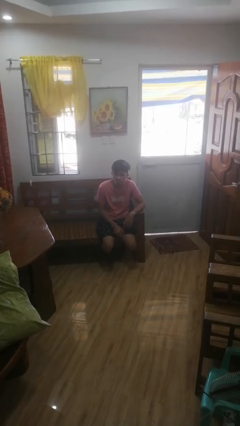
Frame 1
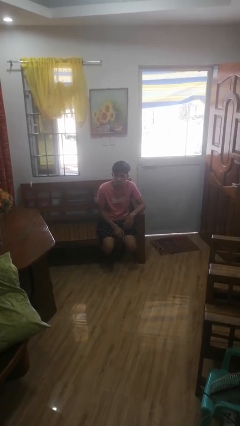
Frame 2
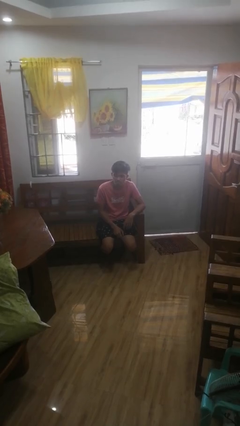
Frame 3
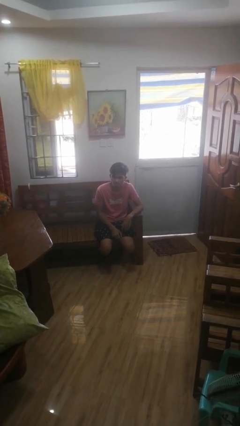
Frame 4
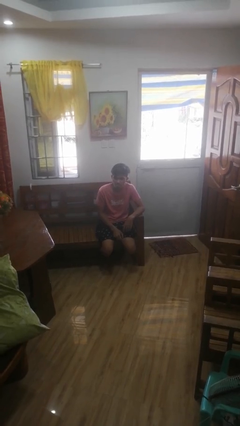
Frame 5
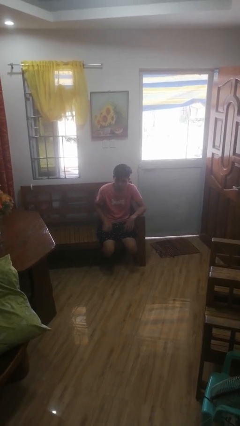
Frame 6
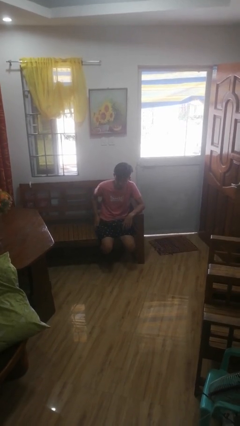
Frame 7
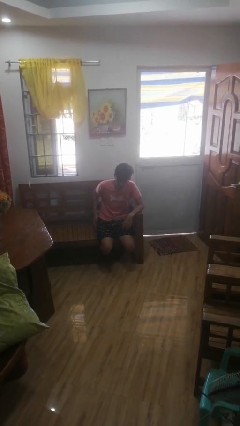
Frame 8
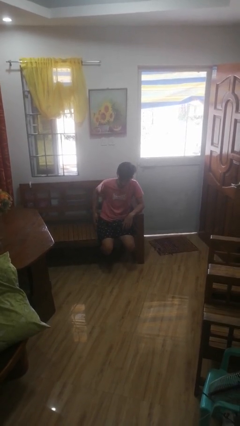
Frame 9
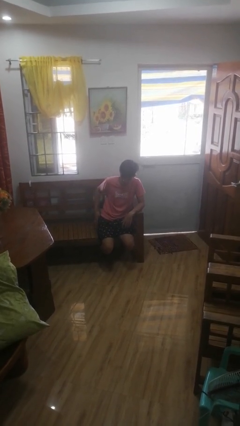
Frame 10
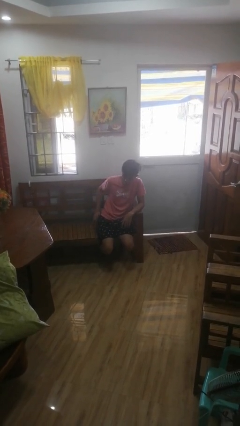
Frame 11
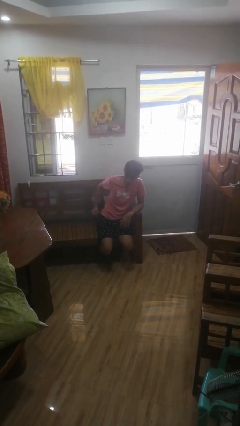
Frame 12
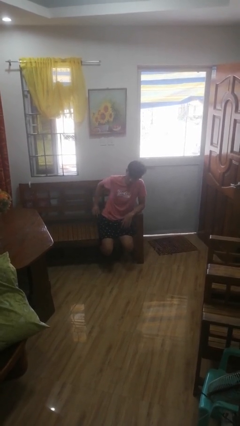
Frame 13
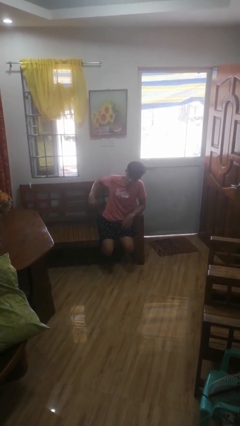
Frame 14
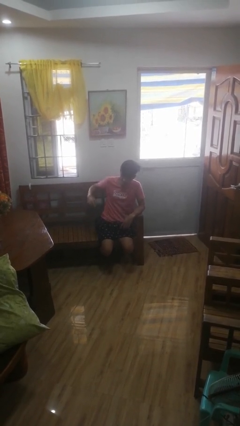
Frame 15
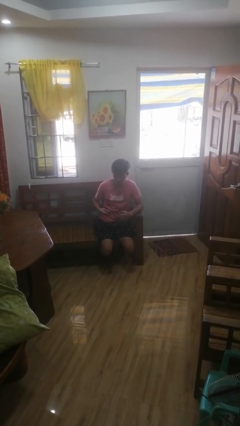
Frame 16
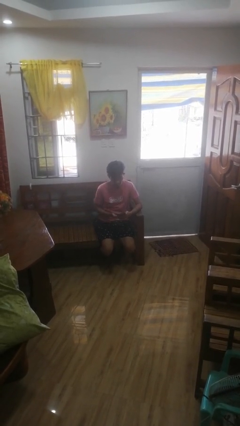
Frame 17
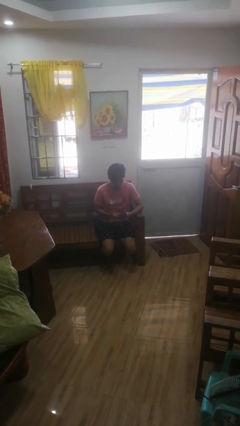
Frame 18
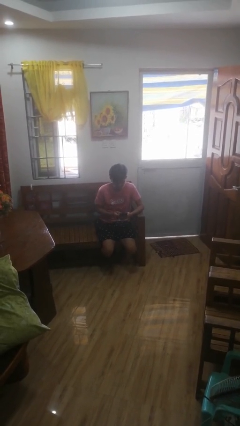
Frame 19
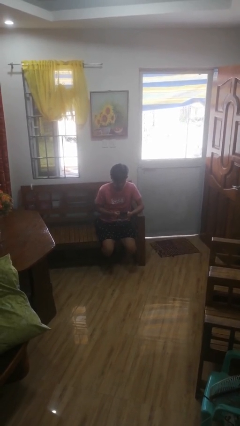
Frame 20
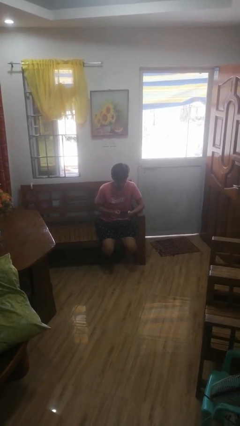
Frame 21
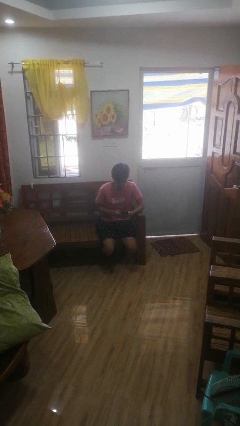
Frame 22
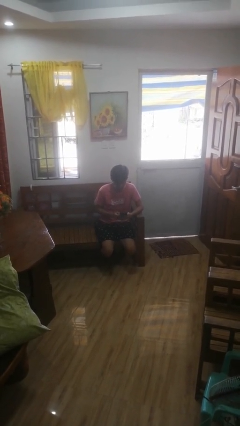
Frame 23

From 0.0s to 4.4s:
person takes phone from pocket

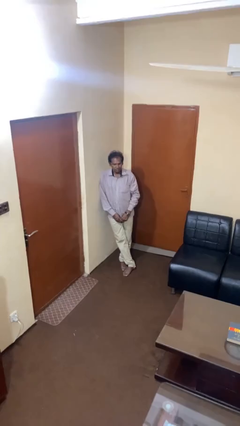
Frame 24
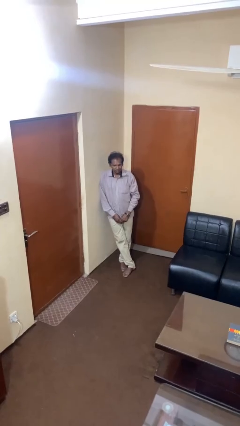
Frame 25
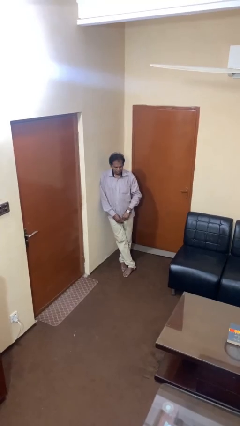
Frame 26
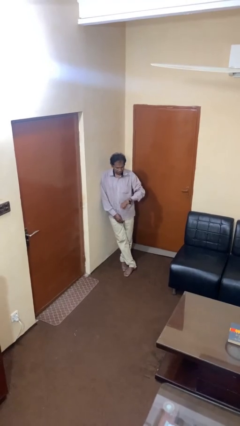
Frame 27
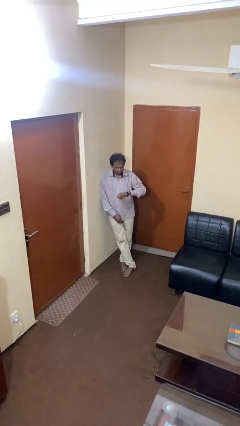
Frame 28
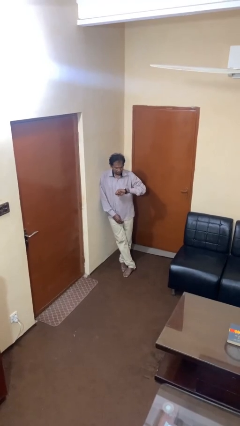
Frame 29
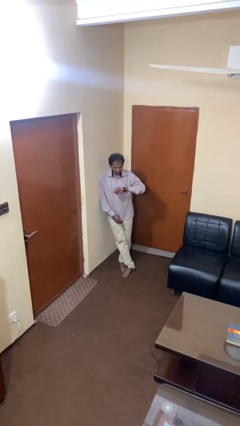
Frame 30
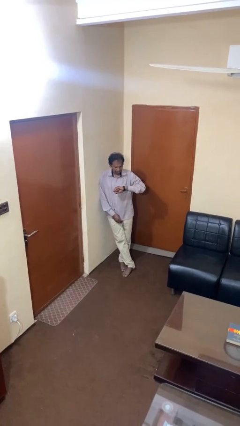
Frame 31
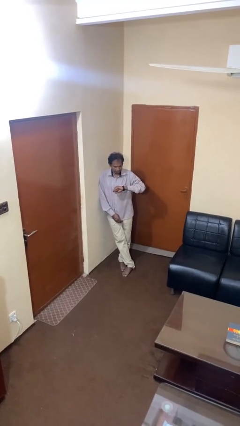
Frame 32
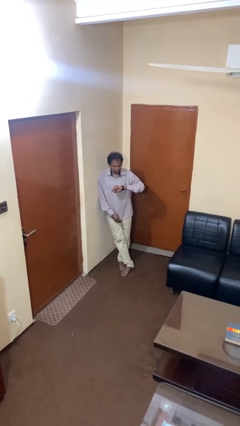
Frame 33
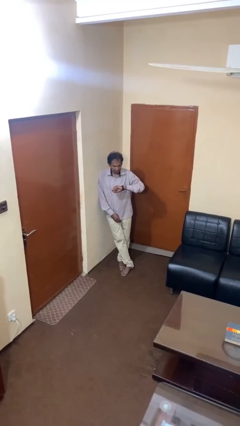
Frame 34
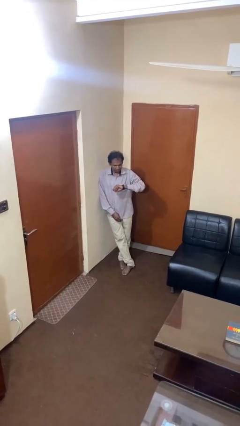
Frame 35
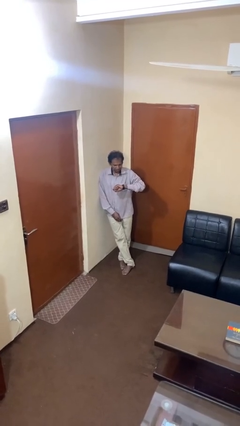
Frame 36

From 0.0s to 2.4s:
person looks at wristwatch

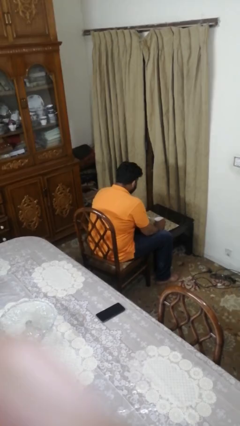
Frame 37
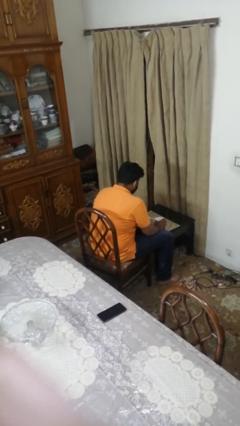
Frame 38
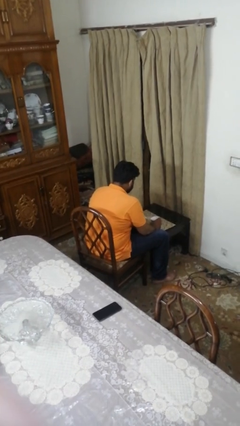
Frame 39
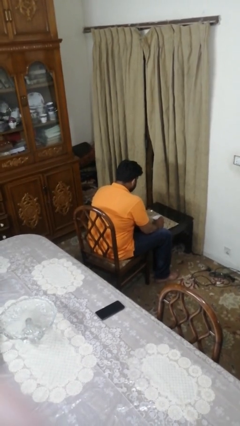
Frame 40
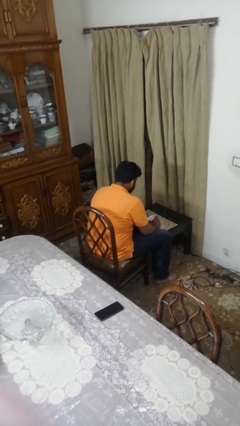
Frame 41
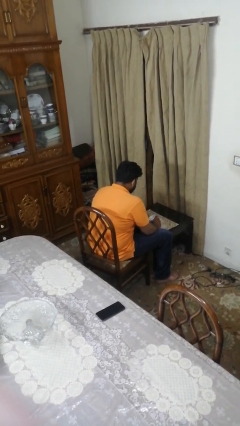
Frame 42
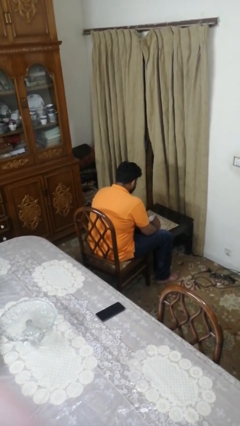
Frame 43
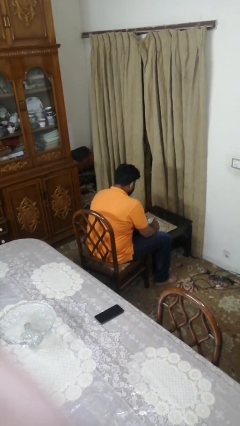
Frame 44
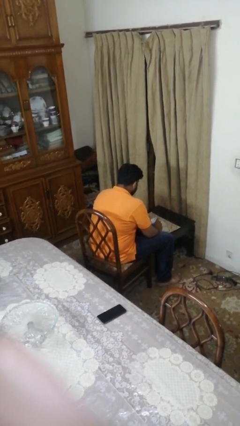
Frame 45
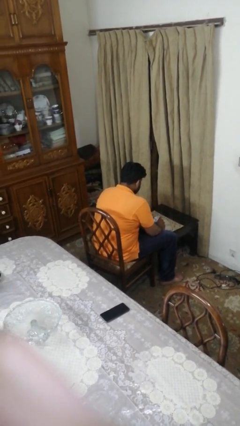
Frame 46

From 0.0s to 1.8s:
person stirs mug

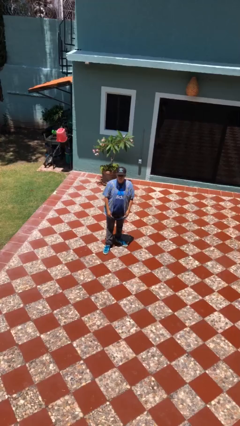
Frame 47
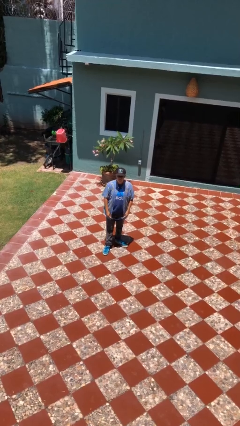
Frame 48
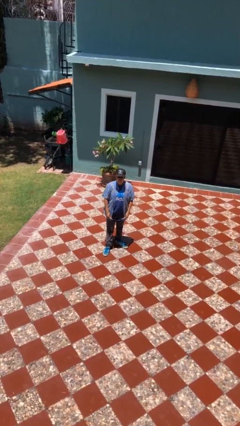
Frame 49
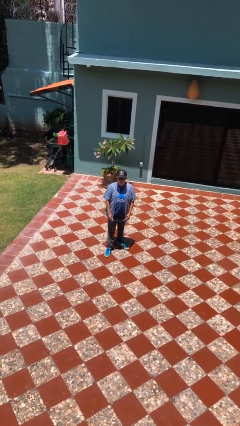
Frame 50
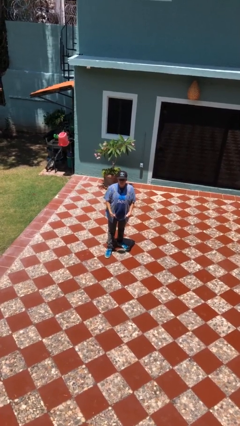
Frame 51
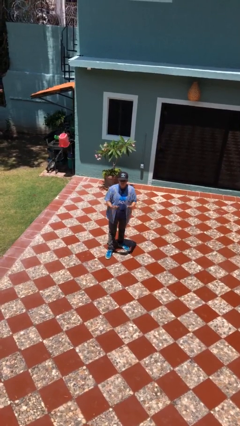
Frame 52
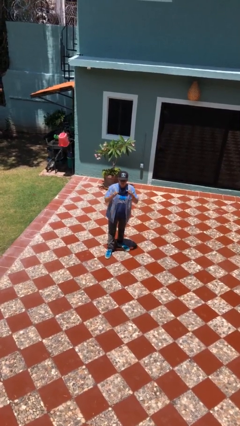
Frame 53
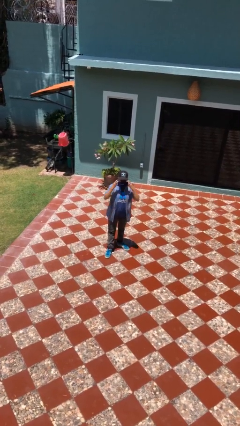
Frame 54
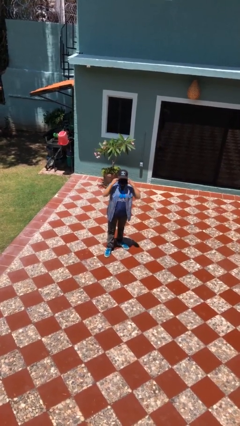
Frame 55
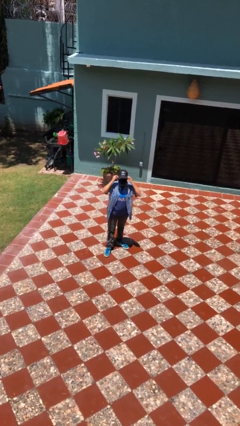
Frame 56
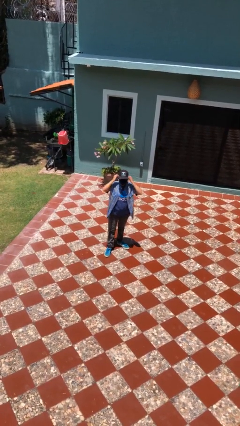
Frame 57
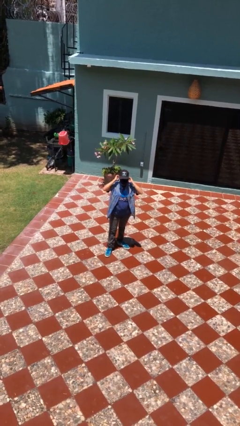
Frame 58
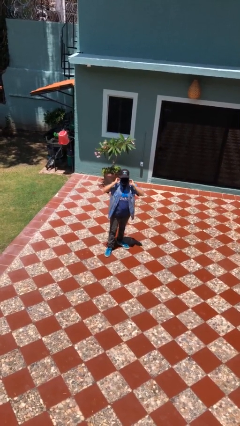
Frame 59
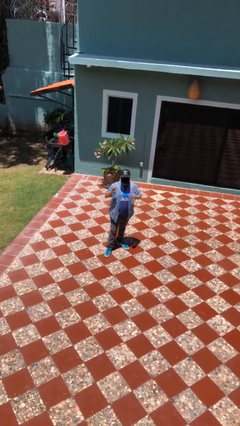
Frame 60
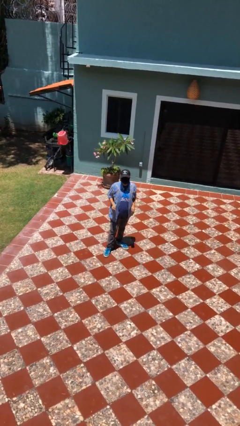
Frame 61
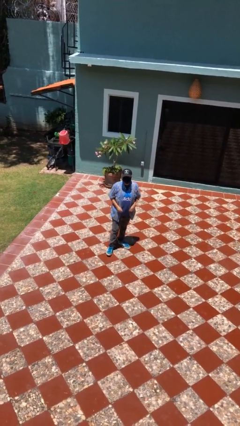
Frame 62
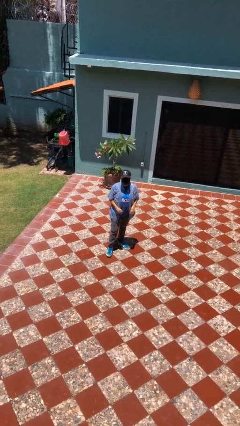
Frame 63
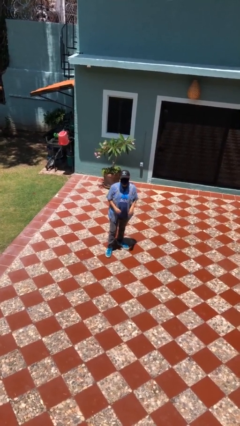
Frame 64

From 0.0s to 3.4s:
person puts on facemask

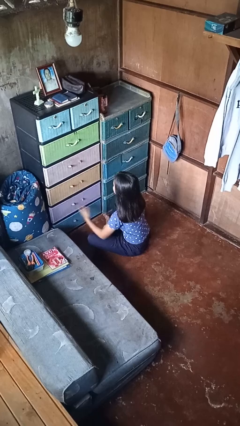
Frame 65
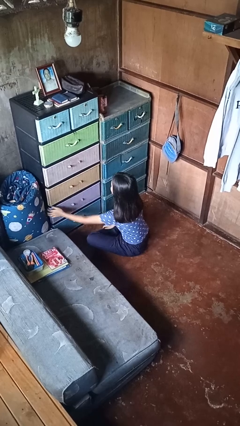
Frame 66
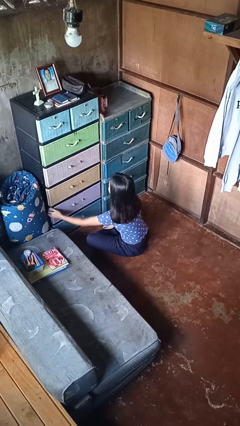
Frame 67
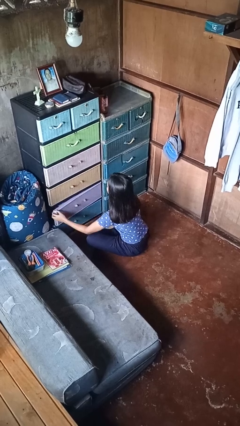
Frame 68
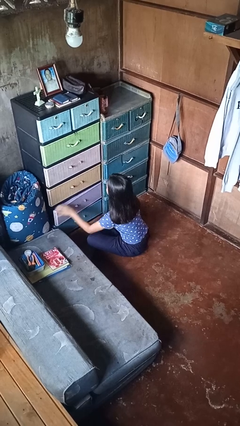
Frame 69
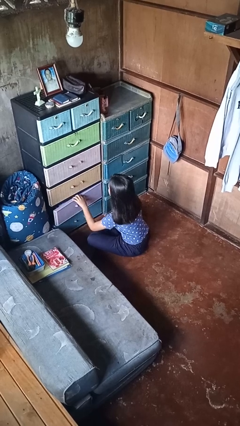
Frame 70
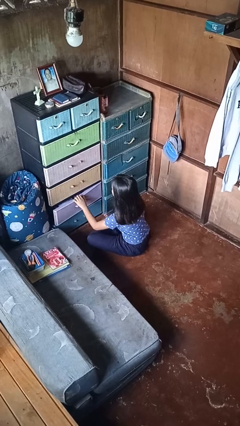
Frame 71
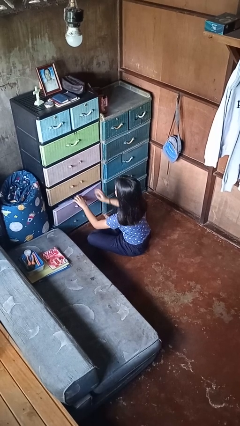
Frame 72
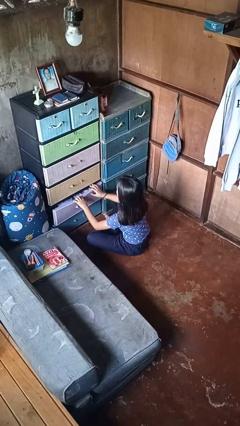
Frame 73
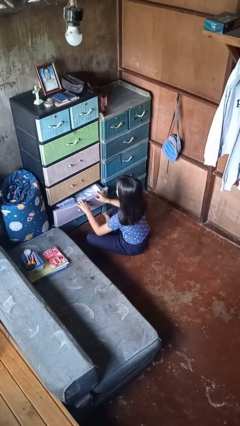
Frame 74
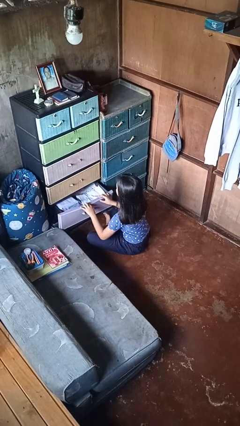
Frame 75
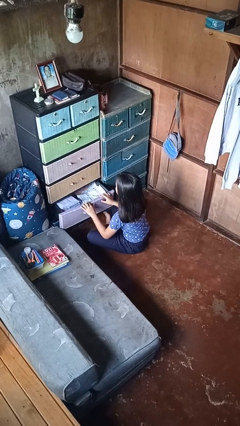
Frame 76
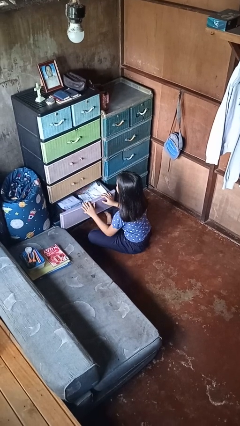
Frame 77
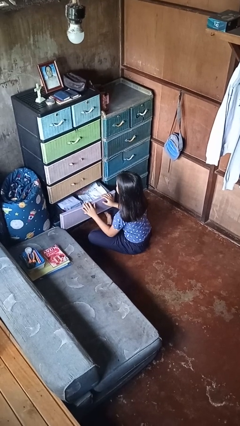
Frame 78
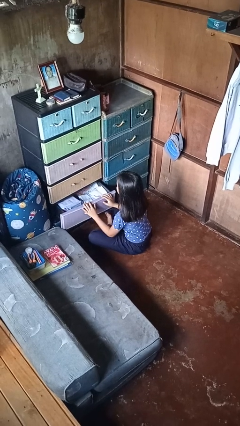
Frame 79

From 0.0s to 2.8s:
person opens dresser drawer

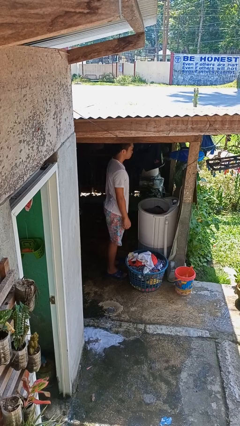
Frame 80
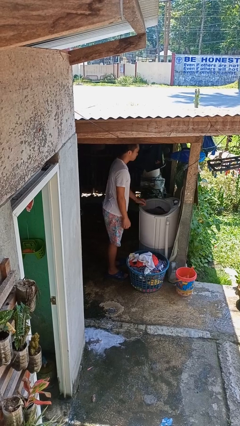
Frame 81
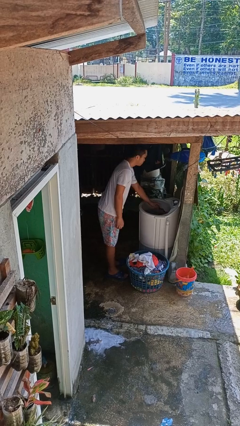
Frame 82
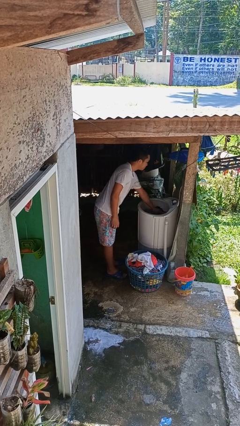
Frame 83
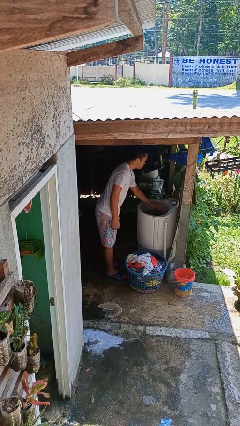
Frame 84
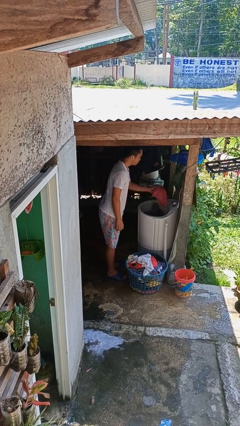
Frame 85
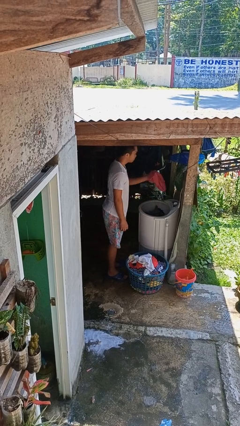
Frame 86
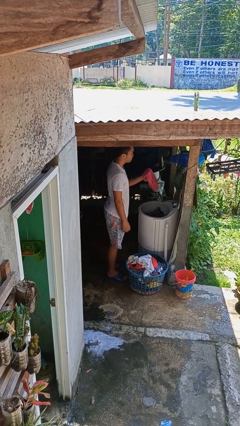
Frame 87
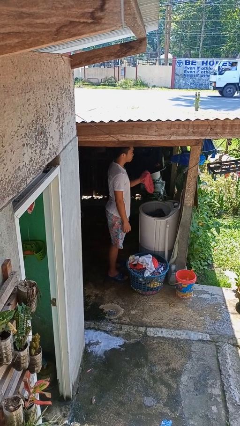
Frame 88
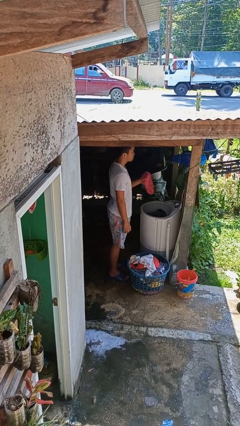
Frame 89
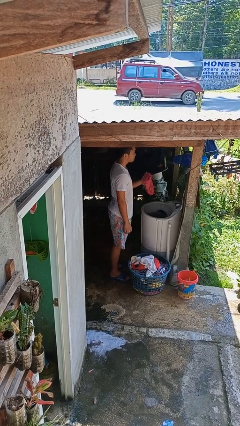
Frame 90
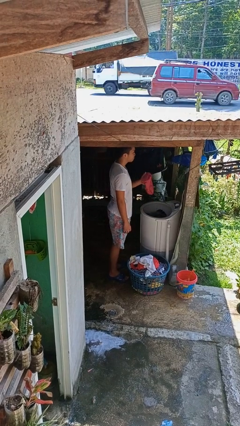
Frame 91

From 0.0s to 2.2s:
person unloads clotheswasher

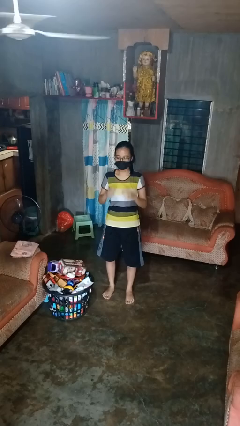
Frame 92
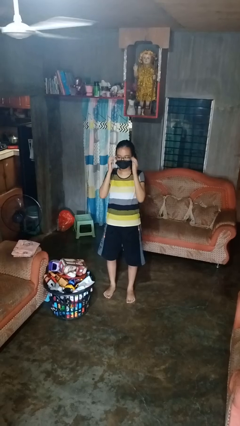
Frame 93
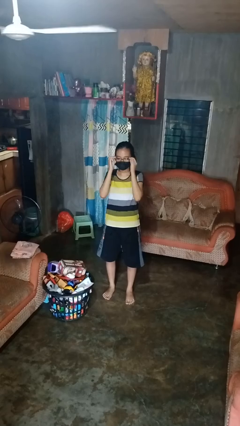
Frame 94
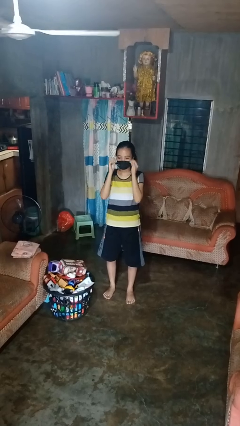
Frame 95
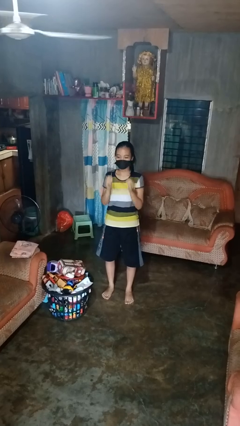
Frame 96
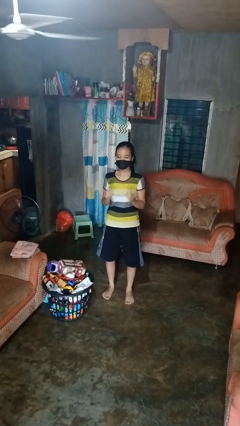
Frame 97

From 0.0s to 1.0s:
person takes off glasses
